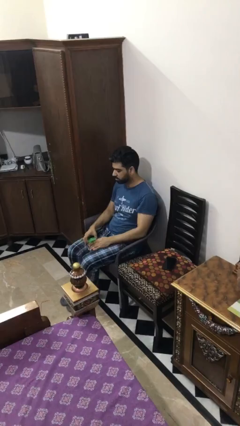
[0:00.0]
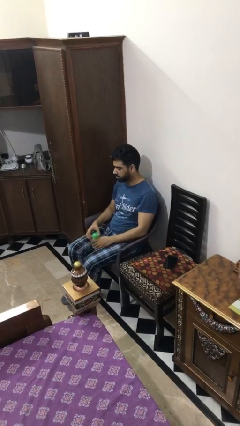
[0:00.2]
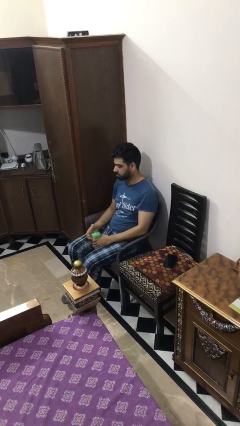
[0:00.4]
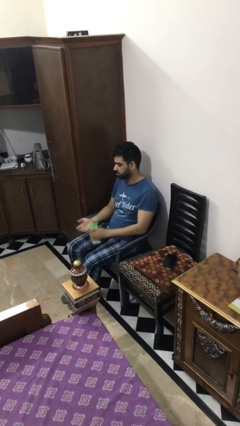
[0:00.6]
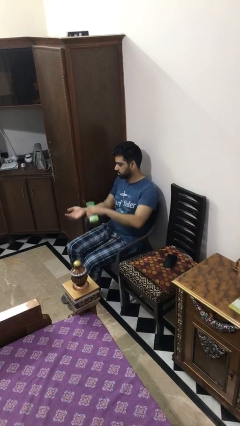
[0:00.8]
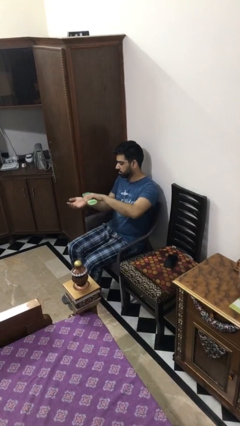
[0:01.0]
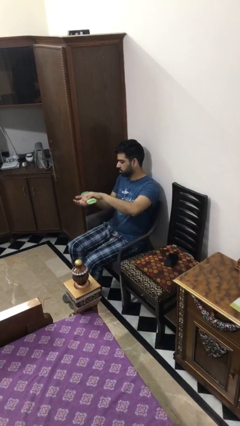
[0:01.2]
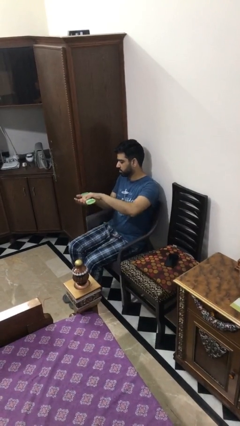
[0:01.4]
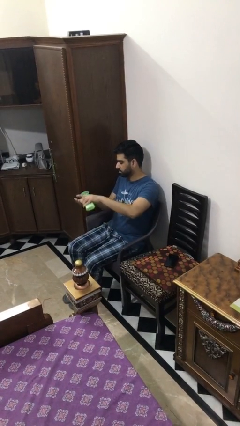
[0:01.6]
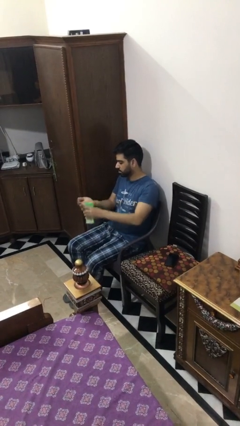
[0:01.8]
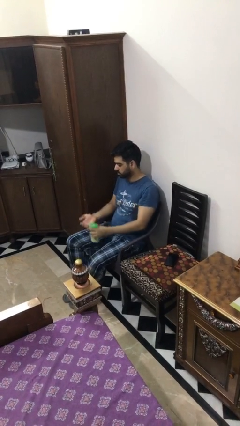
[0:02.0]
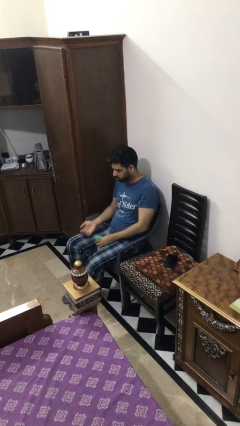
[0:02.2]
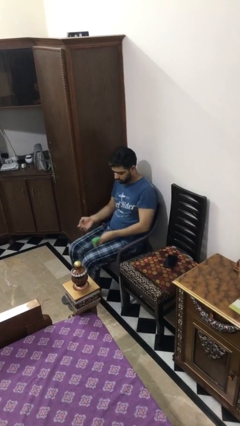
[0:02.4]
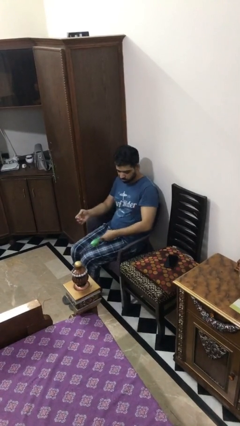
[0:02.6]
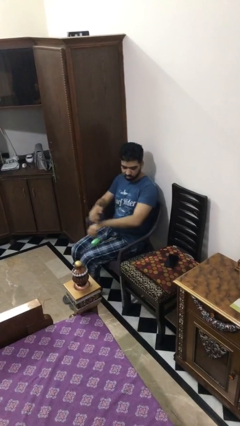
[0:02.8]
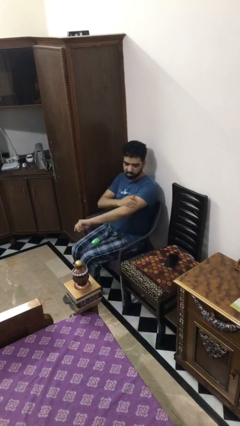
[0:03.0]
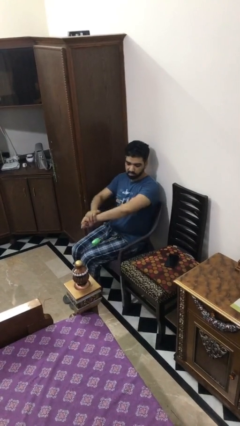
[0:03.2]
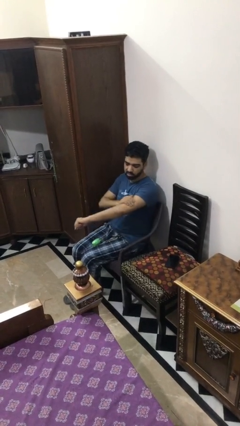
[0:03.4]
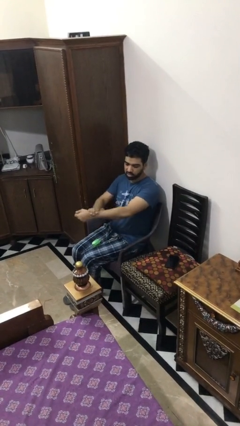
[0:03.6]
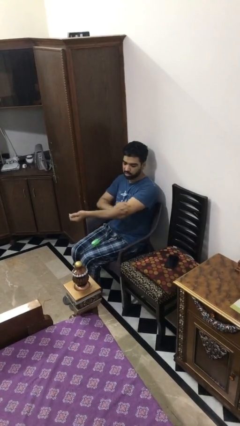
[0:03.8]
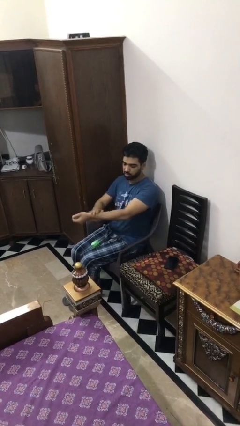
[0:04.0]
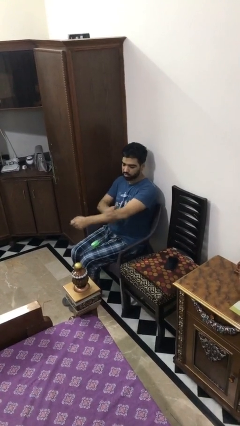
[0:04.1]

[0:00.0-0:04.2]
person applies sunscreen

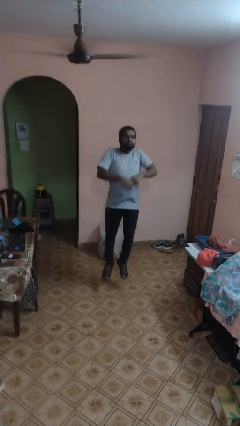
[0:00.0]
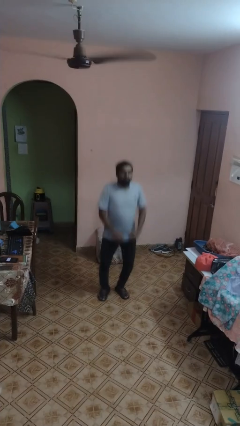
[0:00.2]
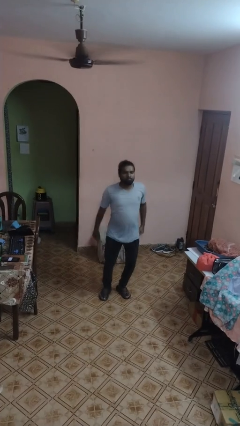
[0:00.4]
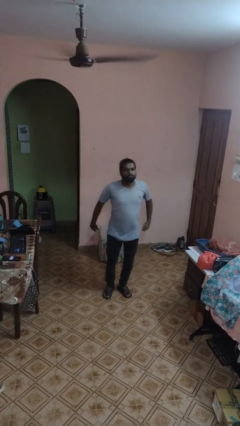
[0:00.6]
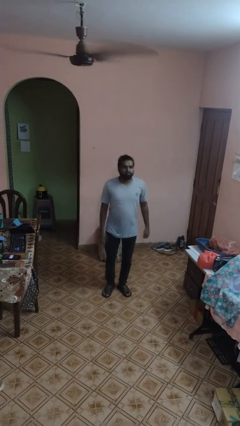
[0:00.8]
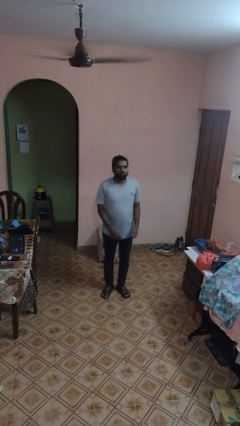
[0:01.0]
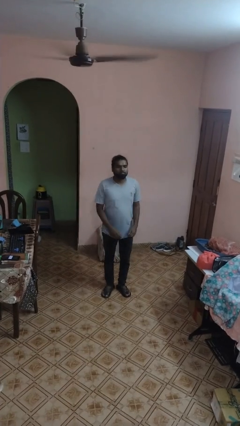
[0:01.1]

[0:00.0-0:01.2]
person jumps

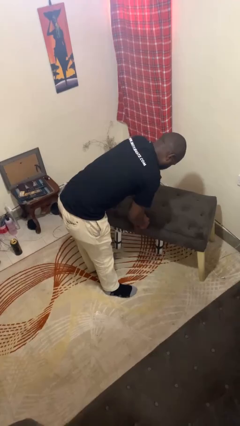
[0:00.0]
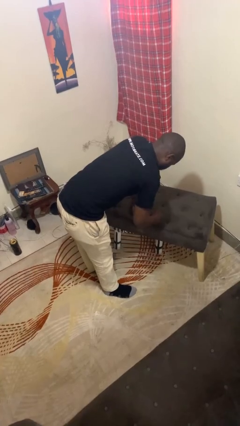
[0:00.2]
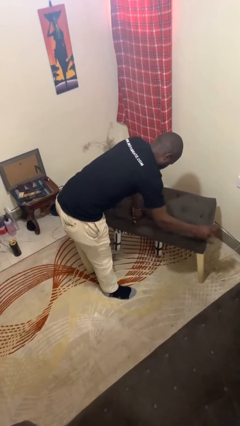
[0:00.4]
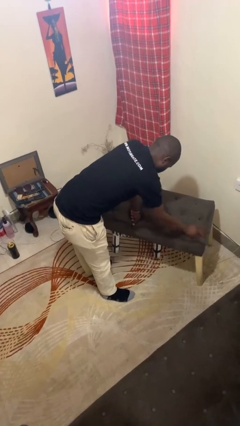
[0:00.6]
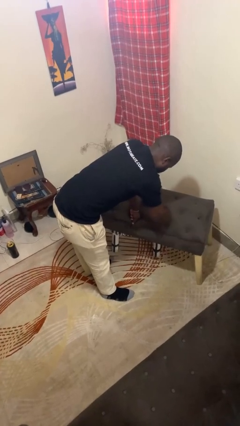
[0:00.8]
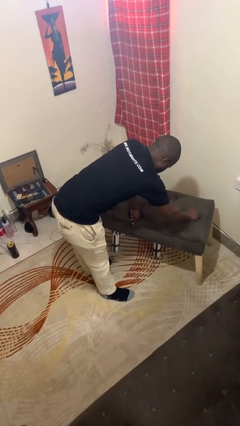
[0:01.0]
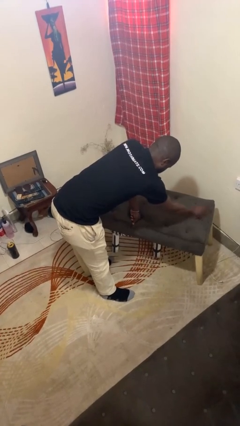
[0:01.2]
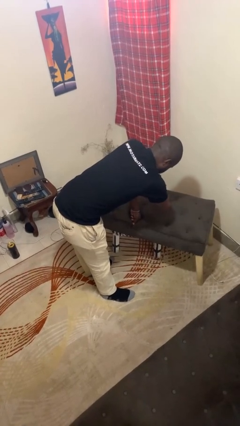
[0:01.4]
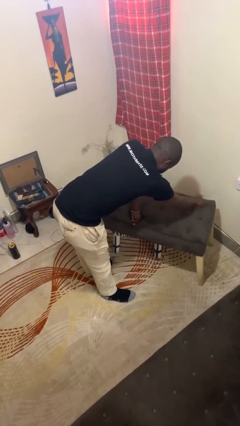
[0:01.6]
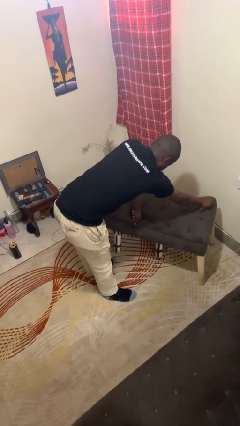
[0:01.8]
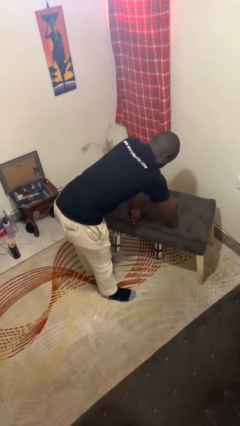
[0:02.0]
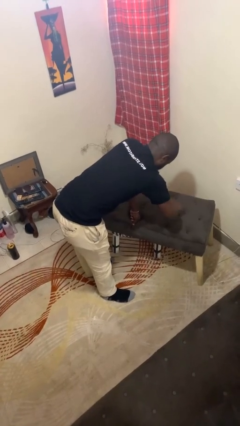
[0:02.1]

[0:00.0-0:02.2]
person cleans table with rag

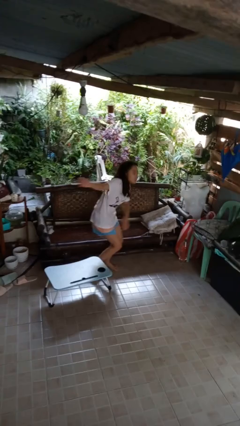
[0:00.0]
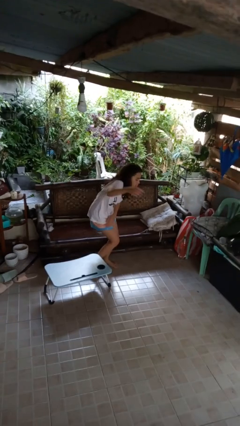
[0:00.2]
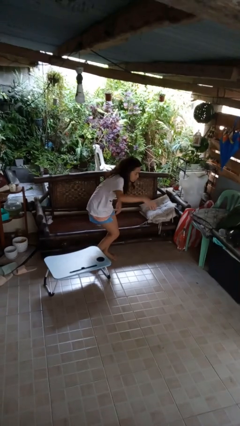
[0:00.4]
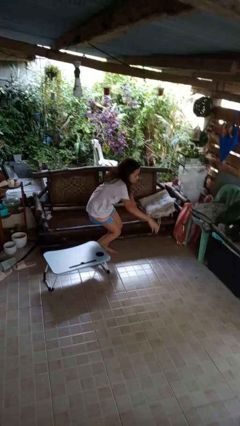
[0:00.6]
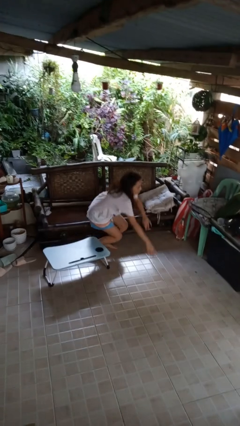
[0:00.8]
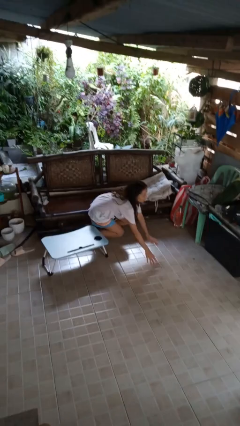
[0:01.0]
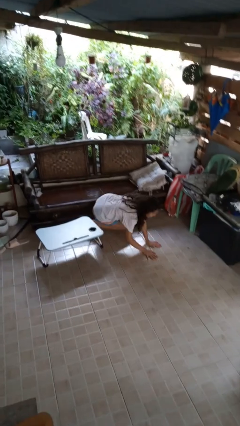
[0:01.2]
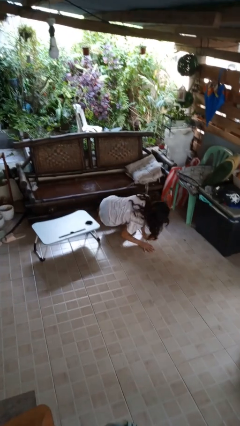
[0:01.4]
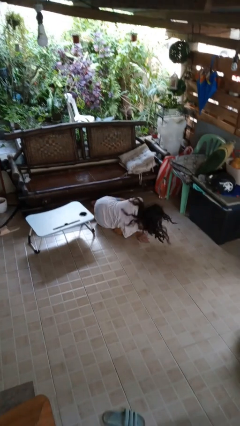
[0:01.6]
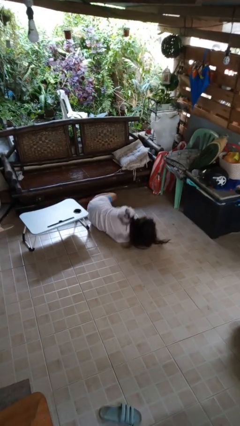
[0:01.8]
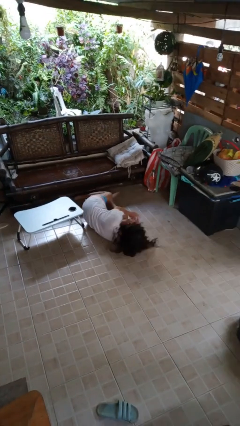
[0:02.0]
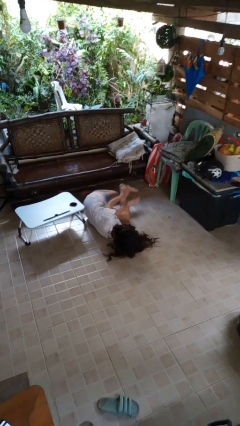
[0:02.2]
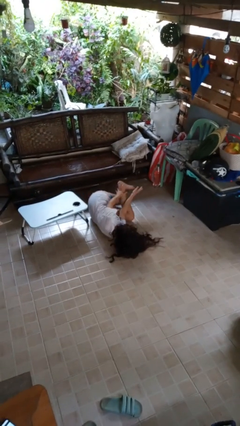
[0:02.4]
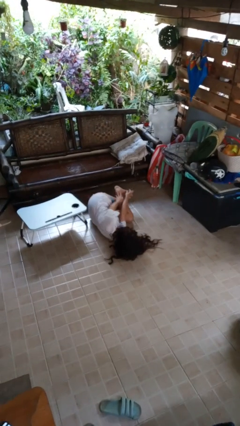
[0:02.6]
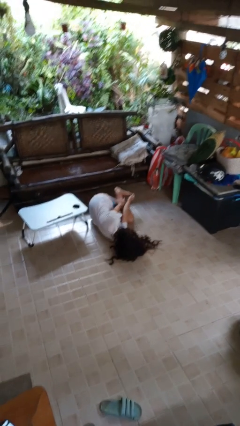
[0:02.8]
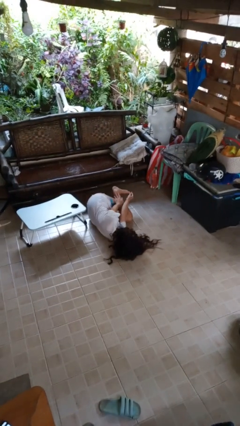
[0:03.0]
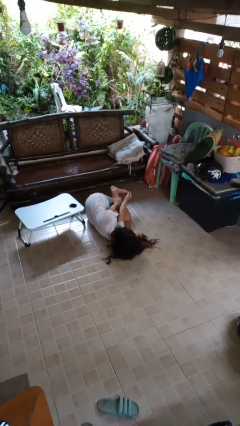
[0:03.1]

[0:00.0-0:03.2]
person lies down on floor

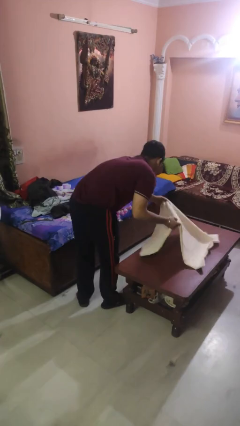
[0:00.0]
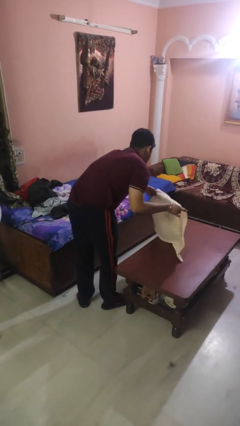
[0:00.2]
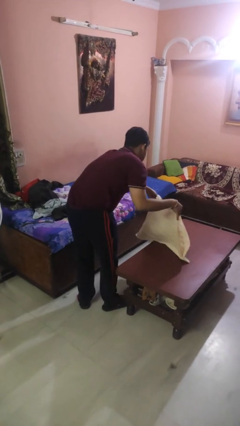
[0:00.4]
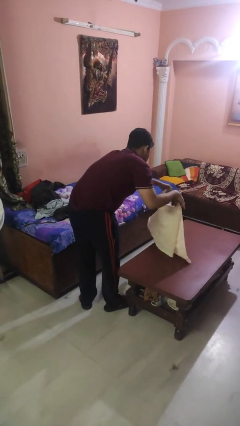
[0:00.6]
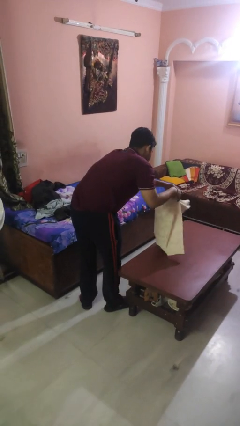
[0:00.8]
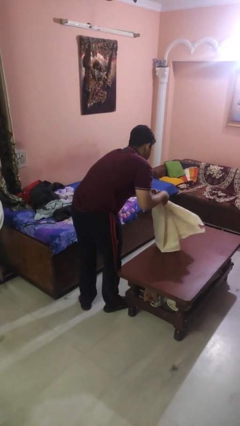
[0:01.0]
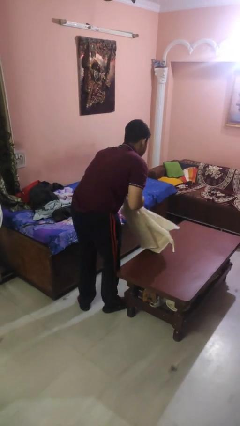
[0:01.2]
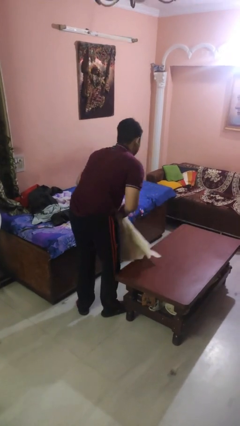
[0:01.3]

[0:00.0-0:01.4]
person folds tablecloth

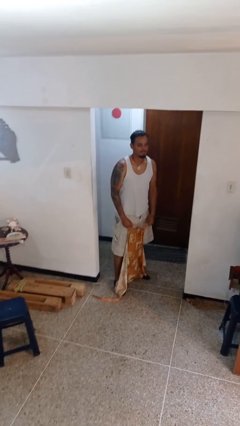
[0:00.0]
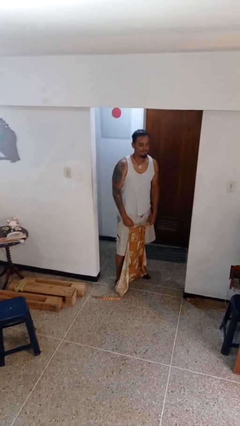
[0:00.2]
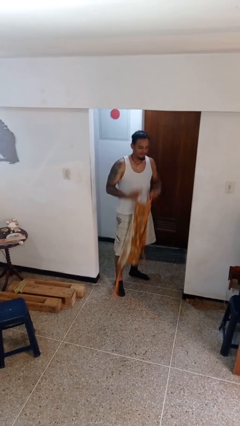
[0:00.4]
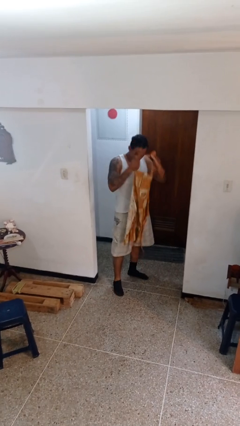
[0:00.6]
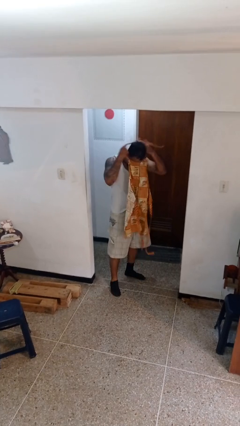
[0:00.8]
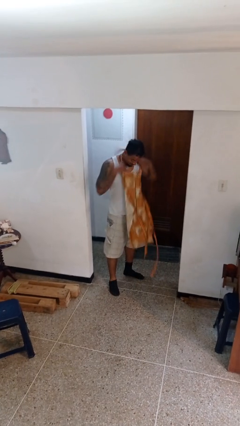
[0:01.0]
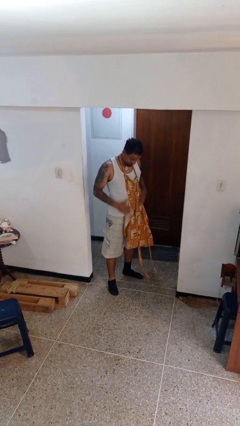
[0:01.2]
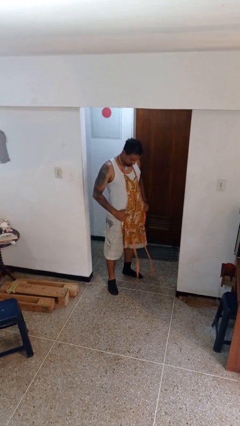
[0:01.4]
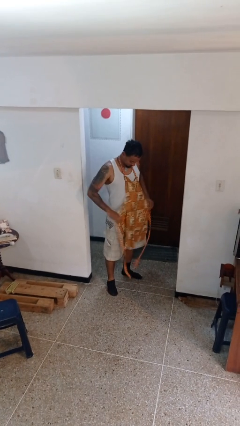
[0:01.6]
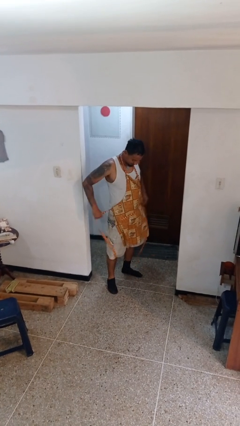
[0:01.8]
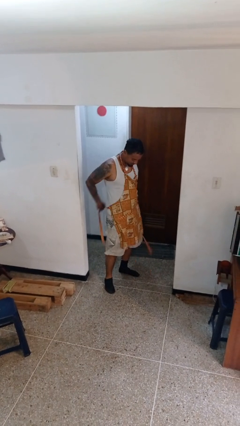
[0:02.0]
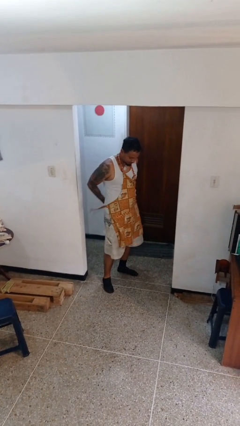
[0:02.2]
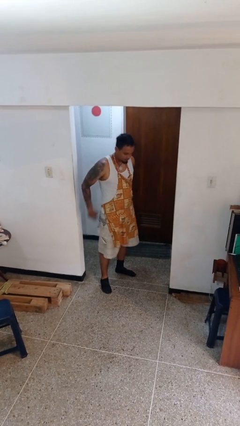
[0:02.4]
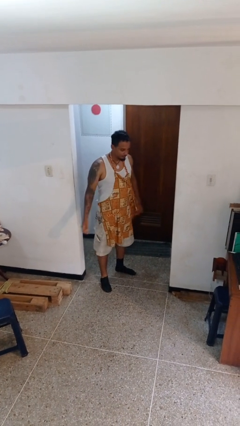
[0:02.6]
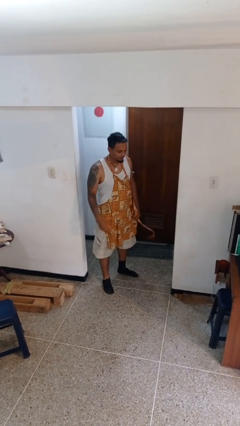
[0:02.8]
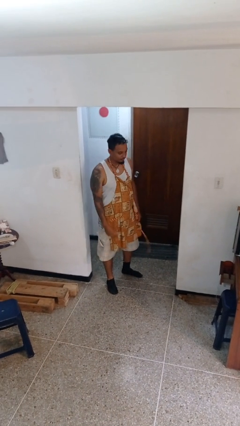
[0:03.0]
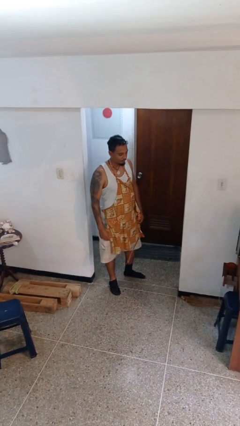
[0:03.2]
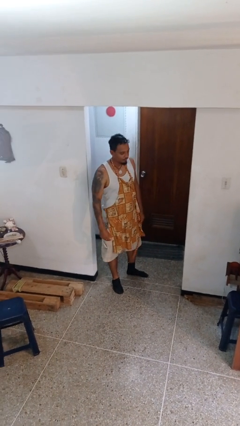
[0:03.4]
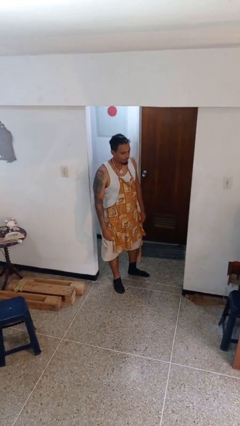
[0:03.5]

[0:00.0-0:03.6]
person puts on apron

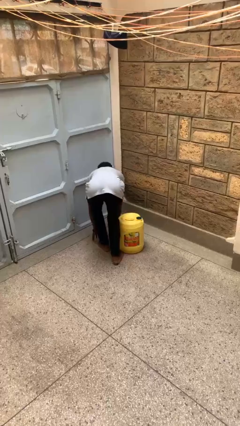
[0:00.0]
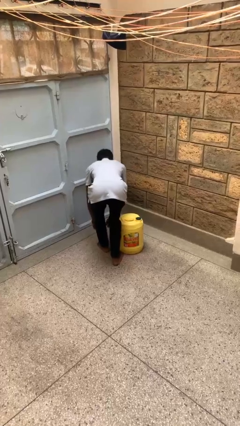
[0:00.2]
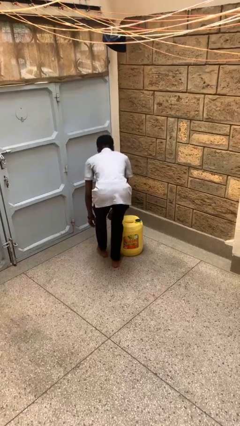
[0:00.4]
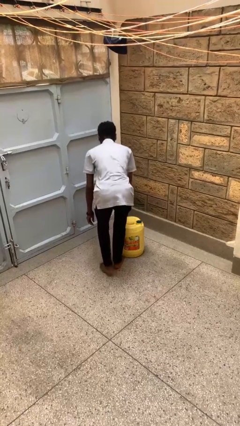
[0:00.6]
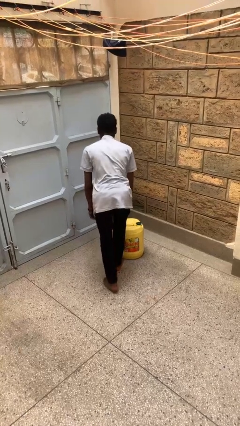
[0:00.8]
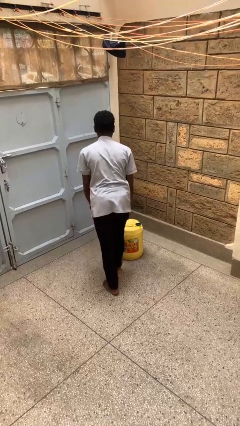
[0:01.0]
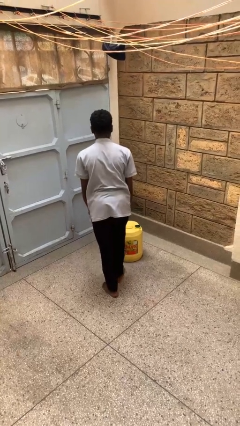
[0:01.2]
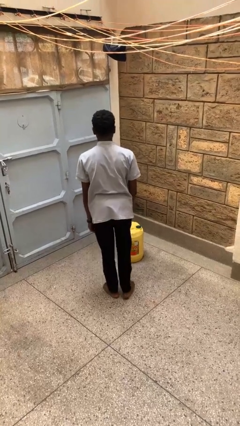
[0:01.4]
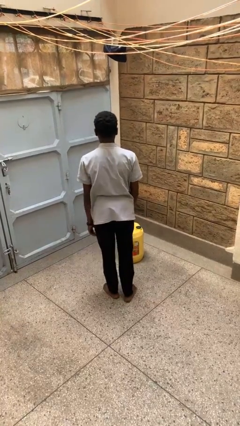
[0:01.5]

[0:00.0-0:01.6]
person stands up from floor
